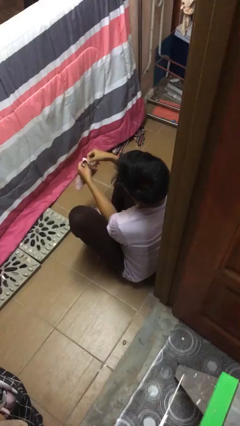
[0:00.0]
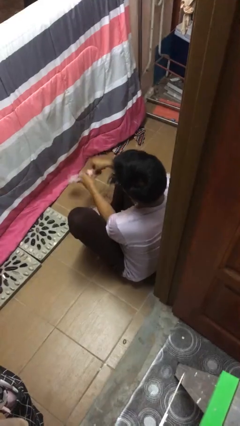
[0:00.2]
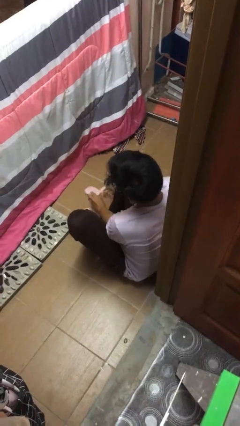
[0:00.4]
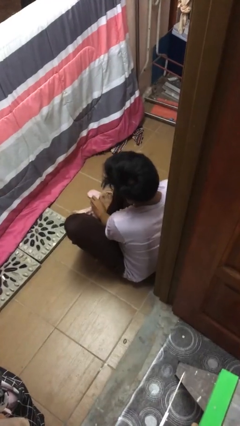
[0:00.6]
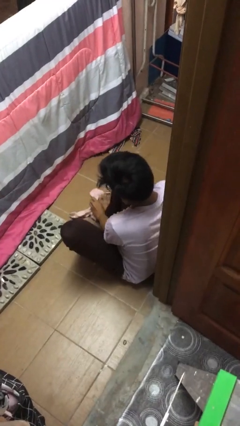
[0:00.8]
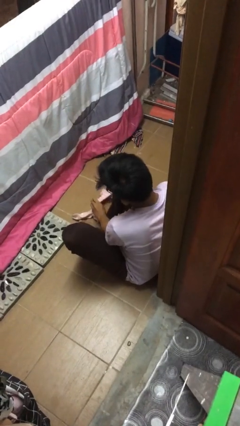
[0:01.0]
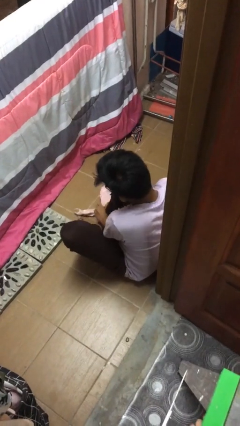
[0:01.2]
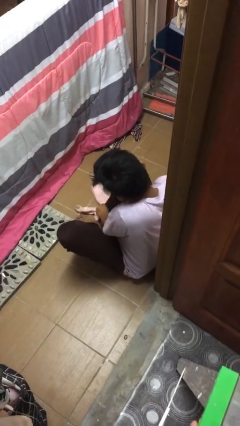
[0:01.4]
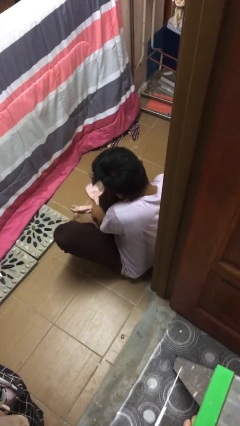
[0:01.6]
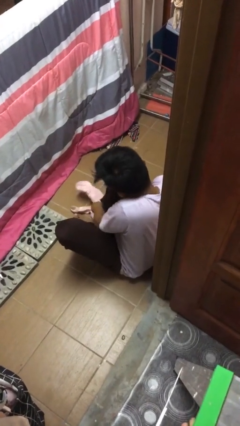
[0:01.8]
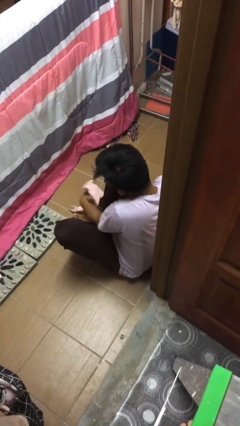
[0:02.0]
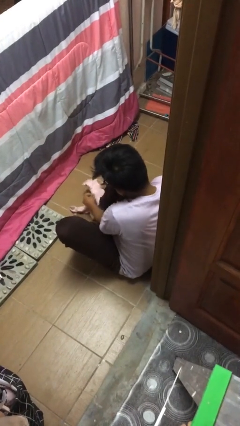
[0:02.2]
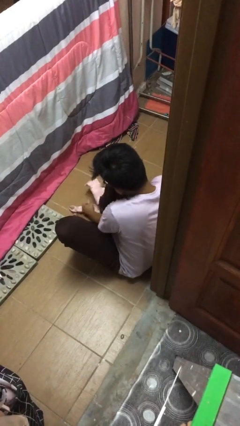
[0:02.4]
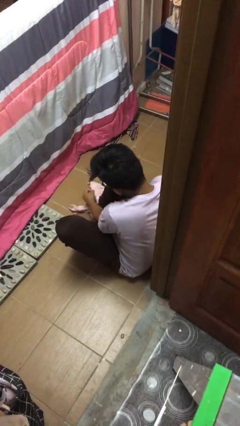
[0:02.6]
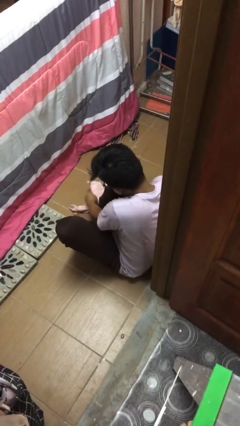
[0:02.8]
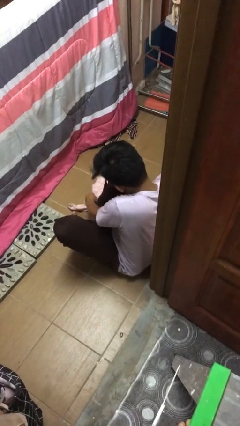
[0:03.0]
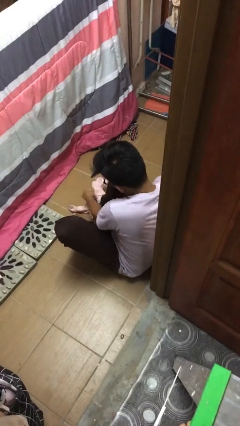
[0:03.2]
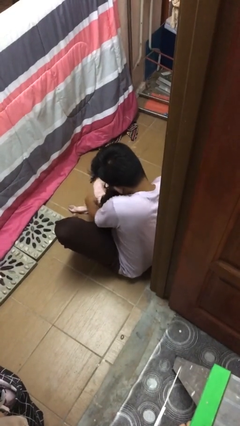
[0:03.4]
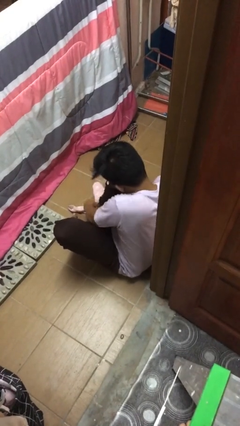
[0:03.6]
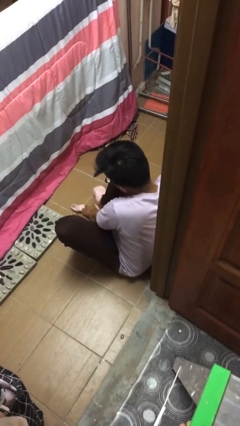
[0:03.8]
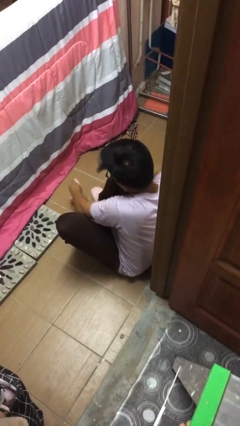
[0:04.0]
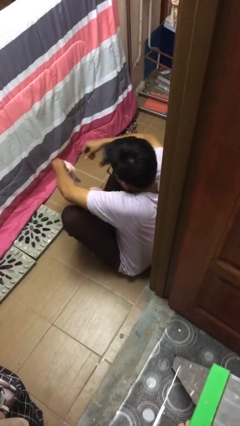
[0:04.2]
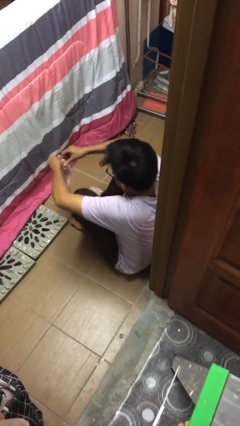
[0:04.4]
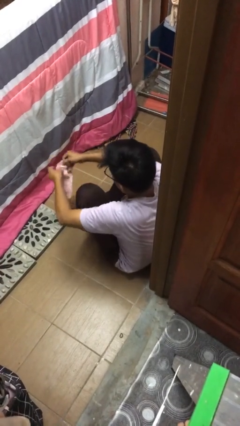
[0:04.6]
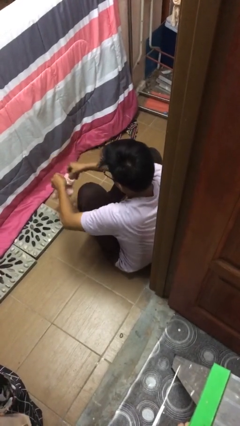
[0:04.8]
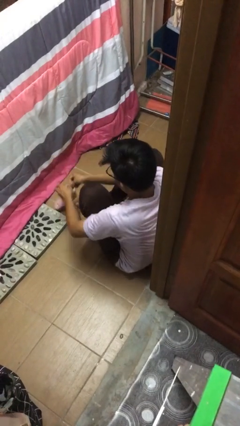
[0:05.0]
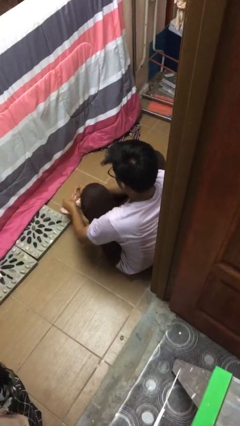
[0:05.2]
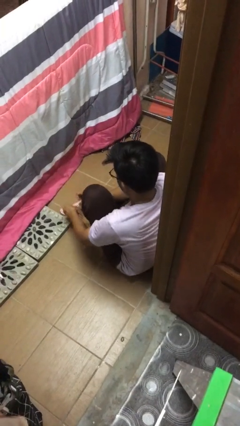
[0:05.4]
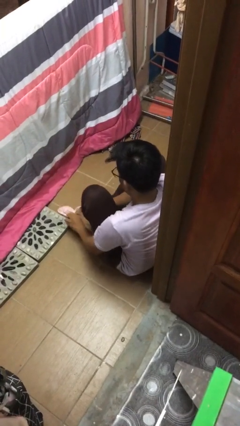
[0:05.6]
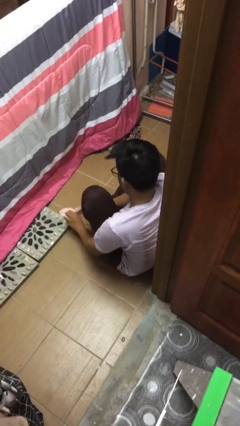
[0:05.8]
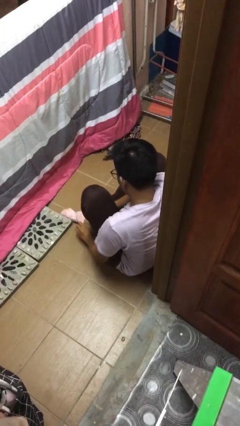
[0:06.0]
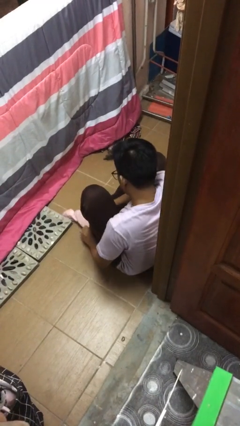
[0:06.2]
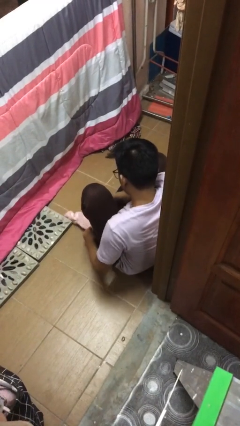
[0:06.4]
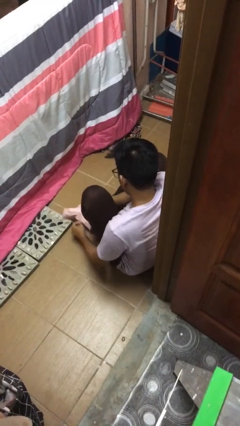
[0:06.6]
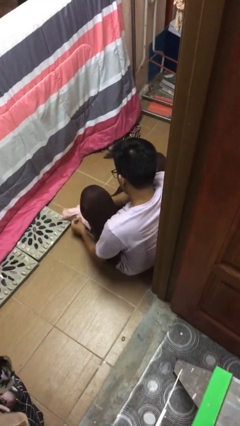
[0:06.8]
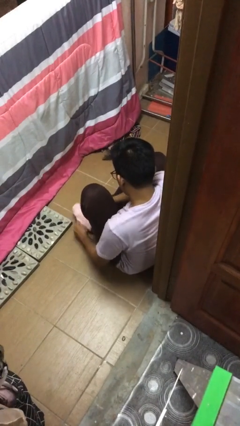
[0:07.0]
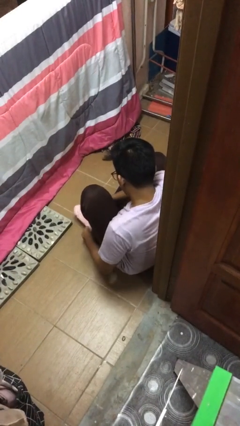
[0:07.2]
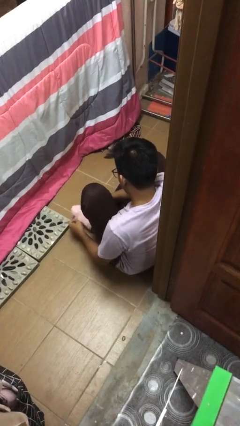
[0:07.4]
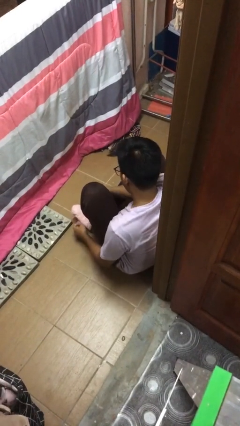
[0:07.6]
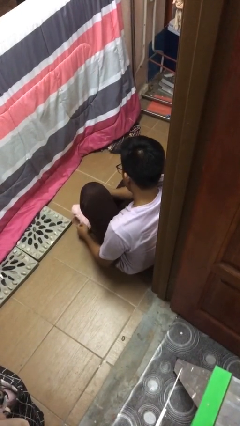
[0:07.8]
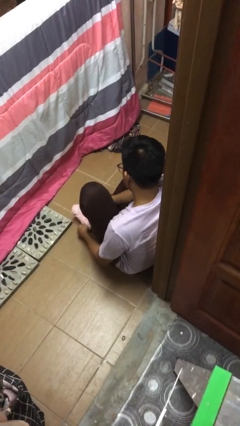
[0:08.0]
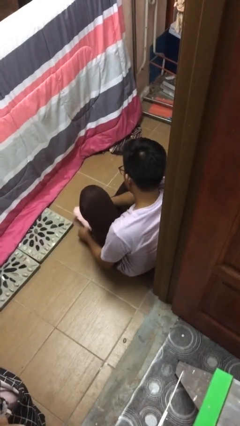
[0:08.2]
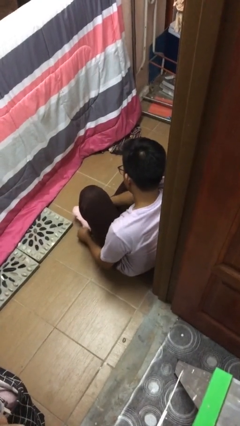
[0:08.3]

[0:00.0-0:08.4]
person puts on socks

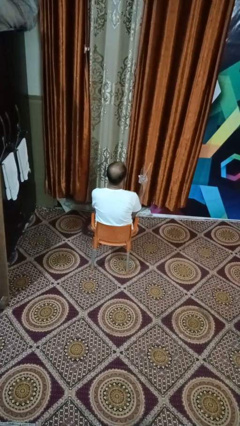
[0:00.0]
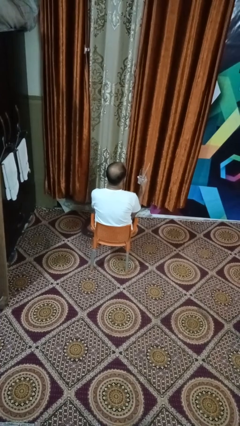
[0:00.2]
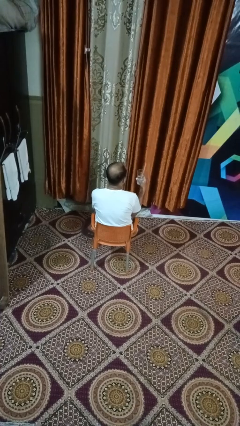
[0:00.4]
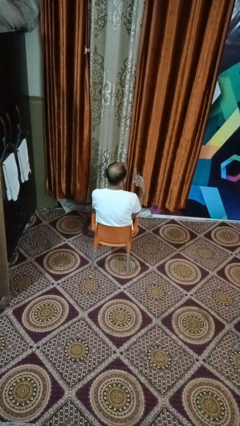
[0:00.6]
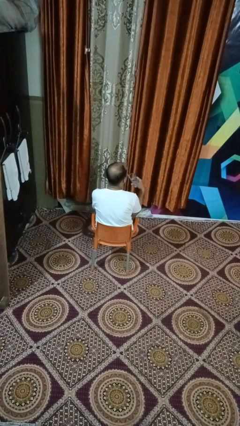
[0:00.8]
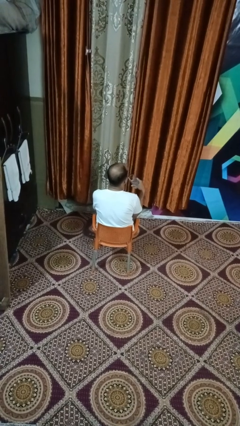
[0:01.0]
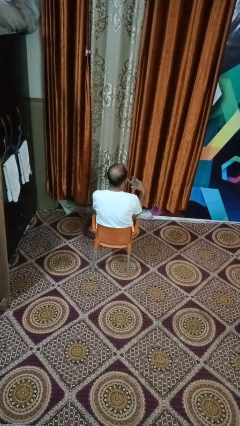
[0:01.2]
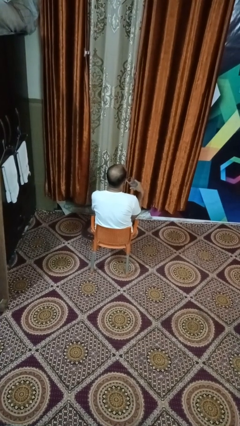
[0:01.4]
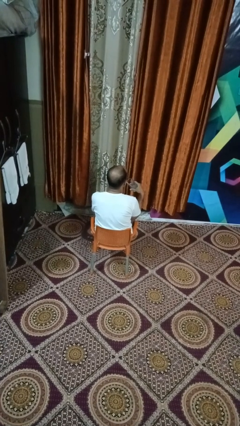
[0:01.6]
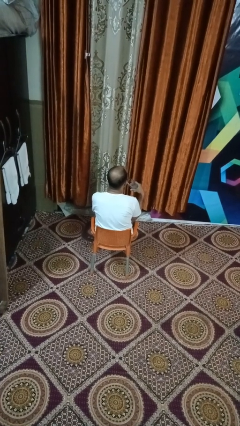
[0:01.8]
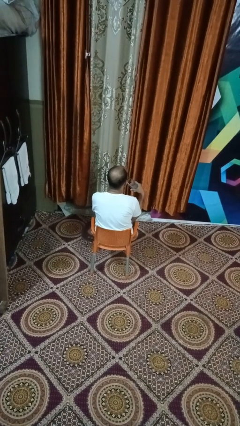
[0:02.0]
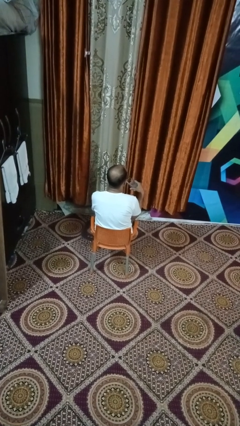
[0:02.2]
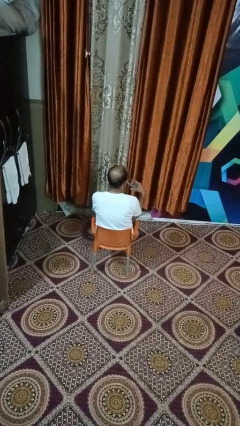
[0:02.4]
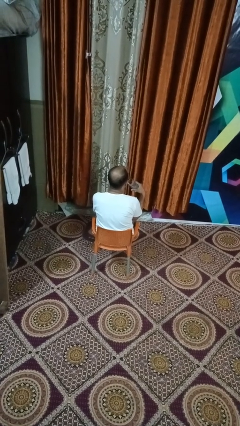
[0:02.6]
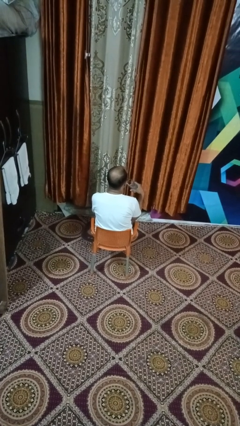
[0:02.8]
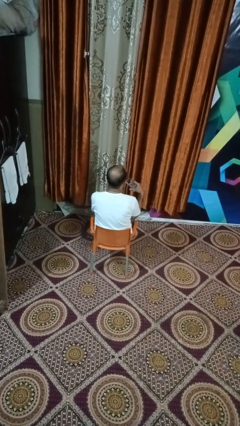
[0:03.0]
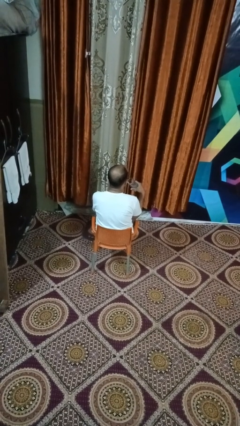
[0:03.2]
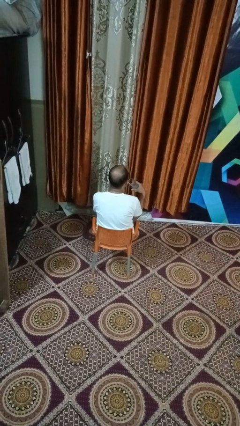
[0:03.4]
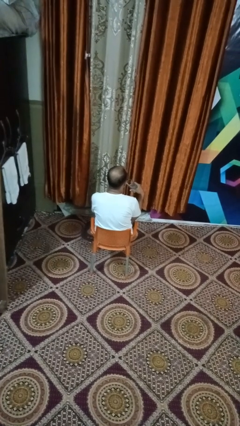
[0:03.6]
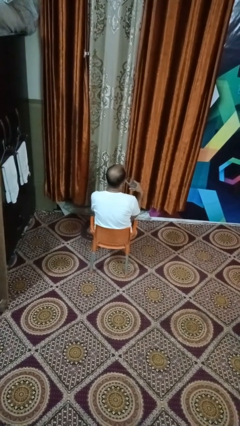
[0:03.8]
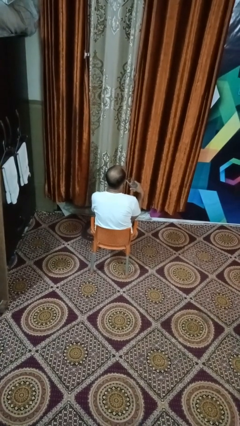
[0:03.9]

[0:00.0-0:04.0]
person drinks from straw

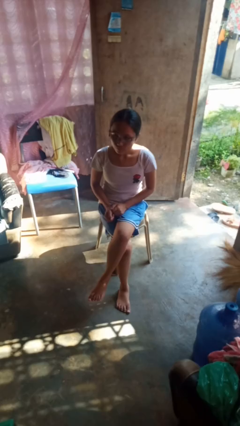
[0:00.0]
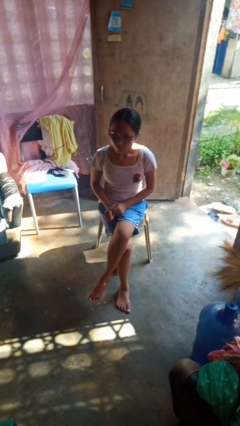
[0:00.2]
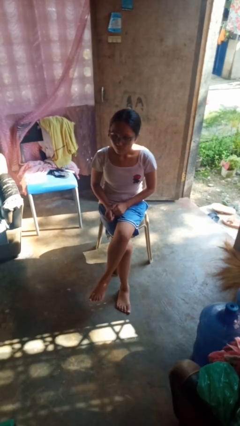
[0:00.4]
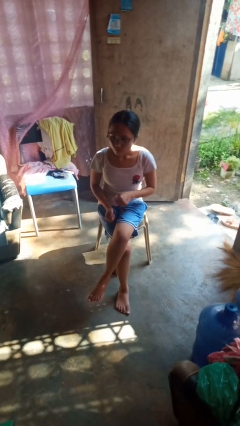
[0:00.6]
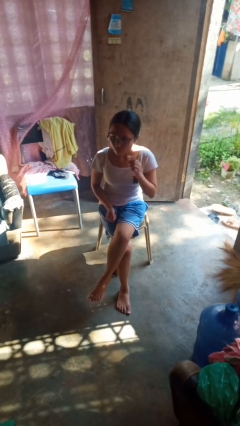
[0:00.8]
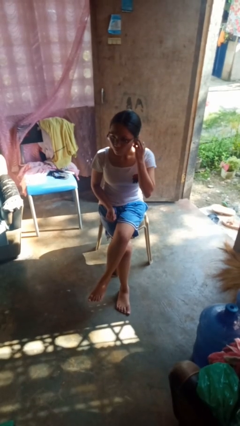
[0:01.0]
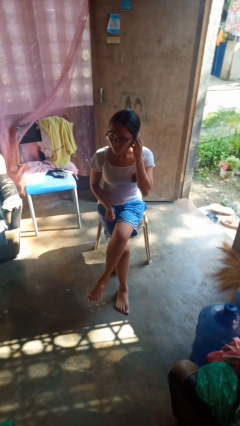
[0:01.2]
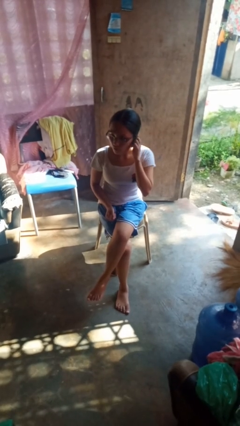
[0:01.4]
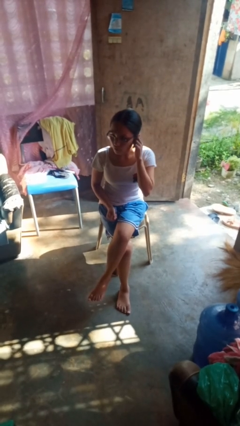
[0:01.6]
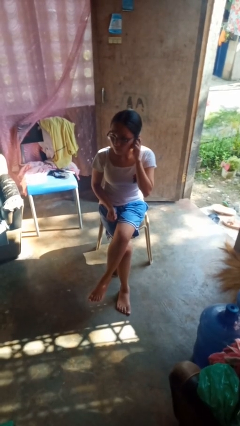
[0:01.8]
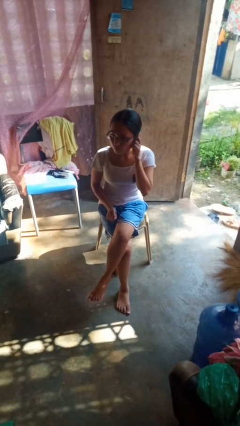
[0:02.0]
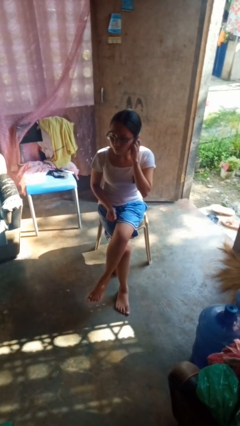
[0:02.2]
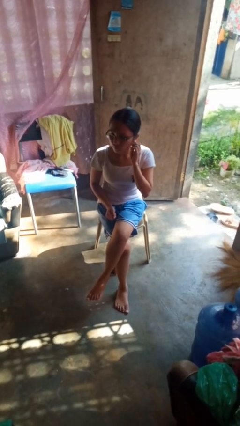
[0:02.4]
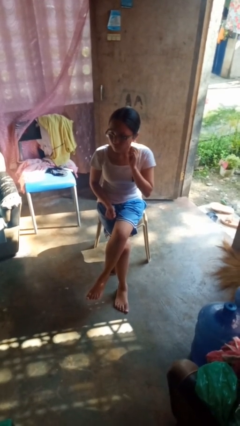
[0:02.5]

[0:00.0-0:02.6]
person touches earlobe

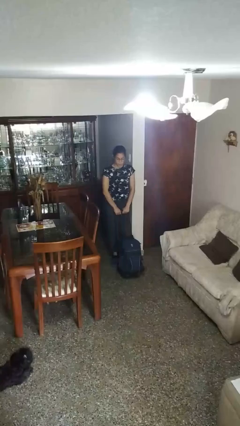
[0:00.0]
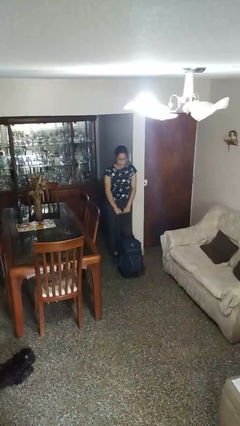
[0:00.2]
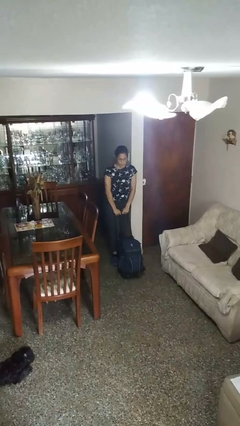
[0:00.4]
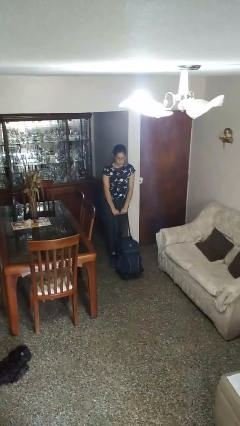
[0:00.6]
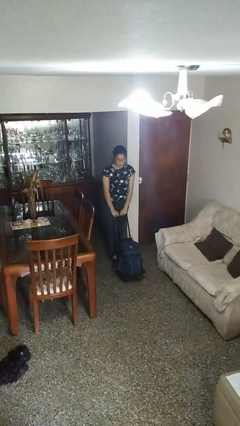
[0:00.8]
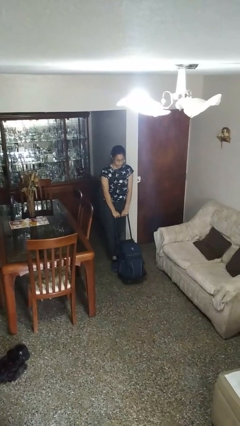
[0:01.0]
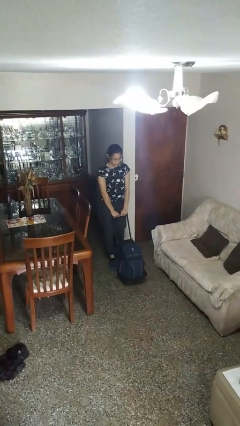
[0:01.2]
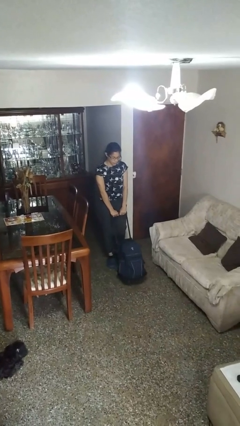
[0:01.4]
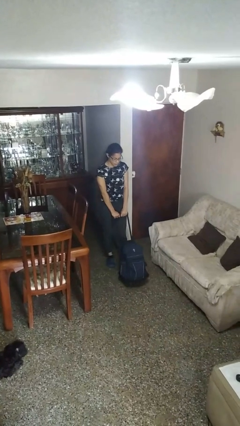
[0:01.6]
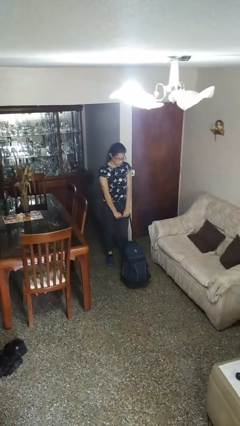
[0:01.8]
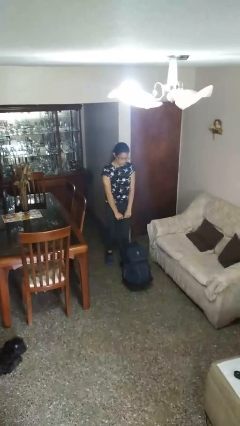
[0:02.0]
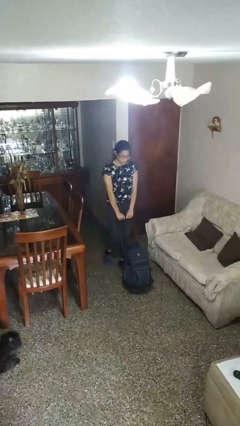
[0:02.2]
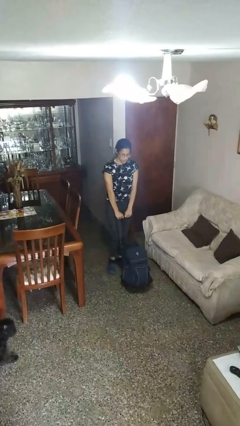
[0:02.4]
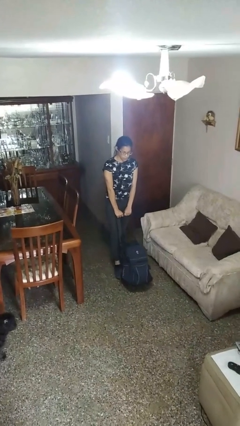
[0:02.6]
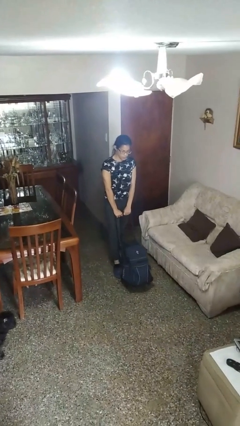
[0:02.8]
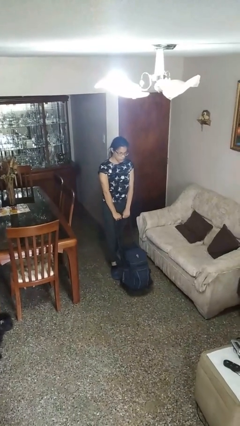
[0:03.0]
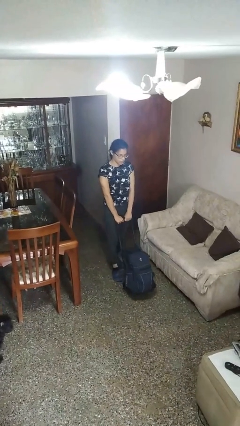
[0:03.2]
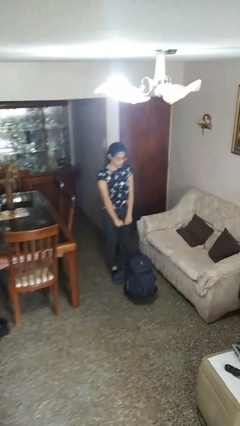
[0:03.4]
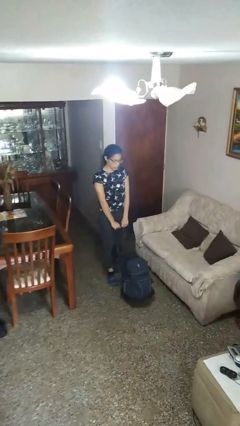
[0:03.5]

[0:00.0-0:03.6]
person pushes wheeled cart
